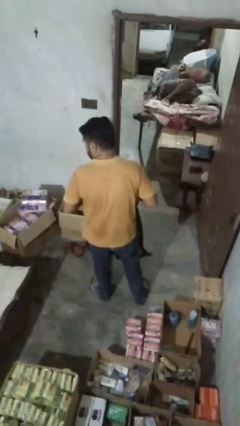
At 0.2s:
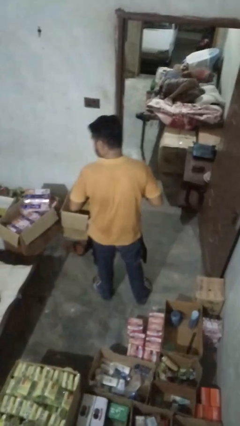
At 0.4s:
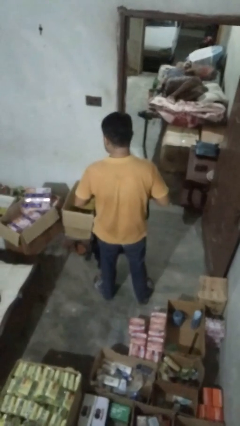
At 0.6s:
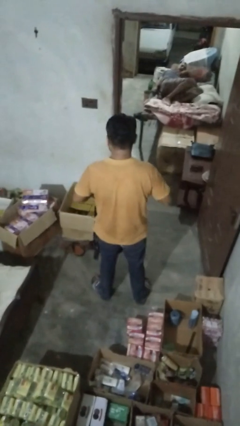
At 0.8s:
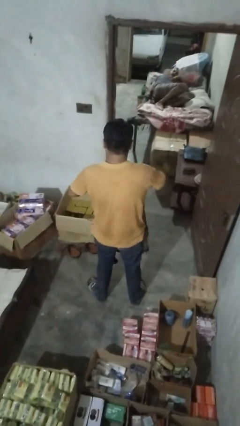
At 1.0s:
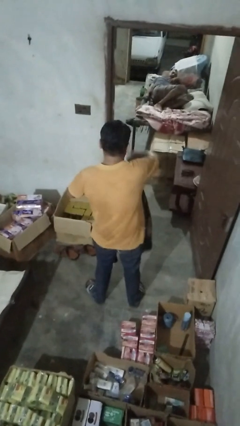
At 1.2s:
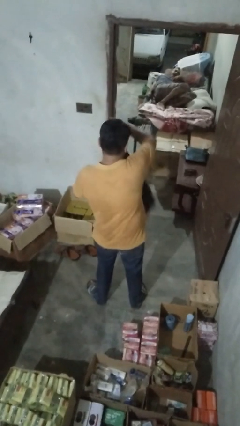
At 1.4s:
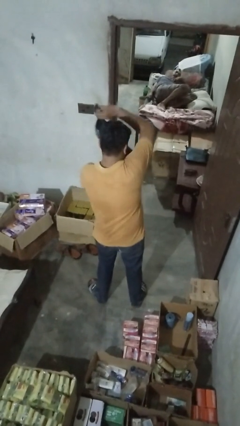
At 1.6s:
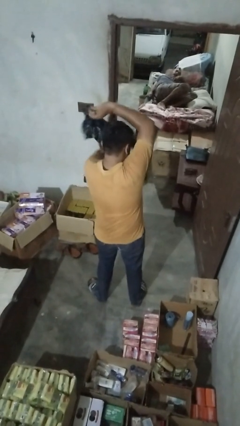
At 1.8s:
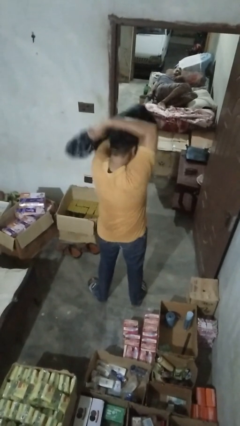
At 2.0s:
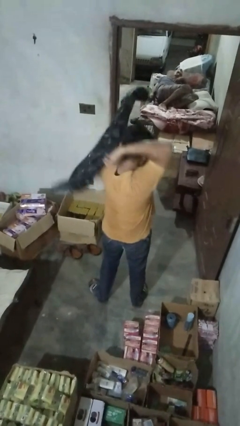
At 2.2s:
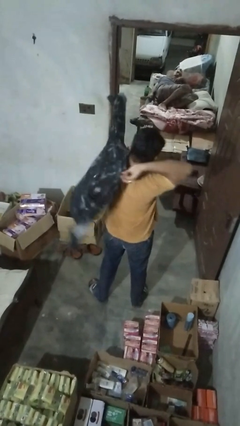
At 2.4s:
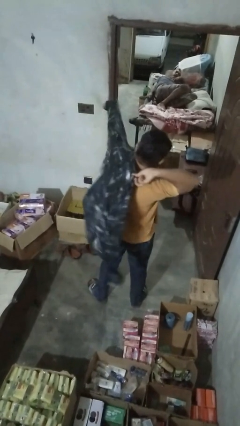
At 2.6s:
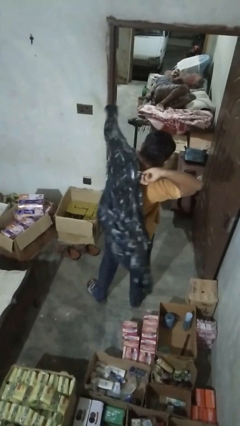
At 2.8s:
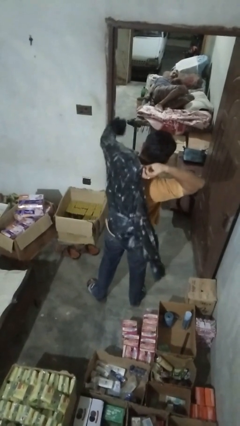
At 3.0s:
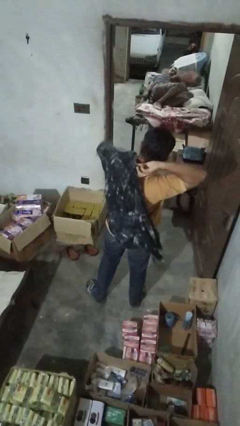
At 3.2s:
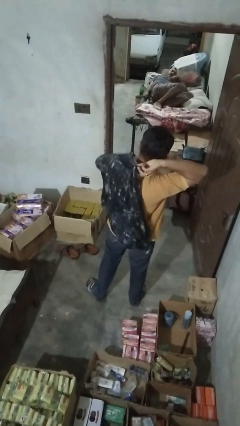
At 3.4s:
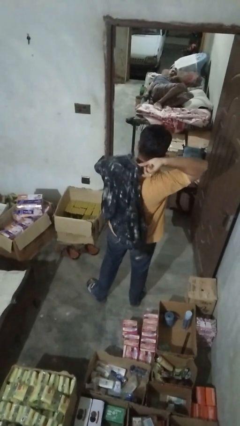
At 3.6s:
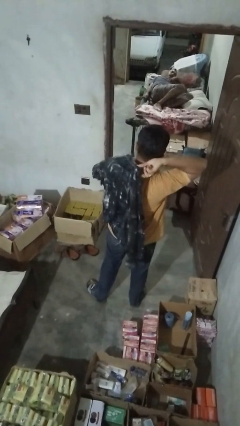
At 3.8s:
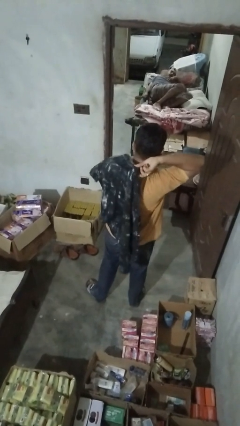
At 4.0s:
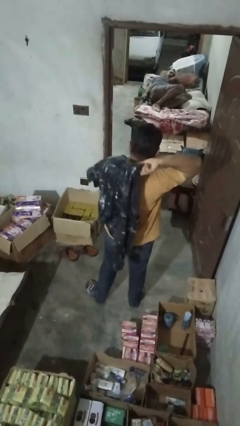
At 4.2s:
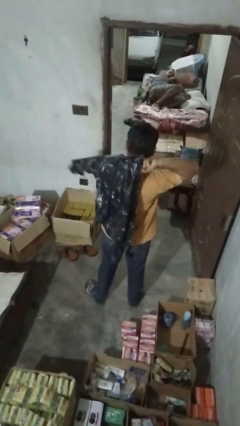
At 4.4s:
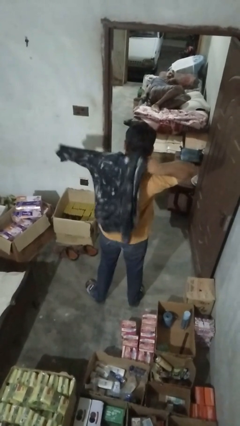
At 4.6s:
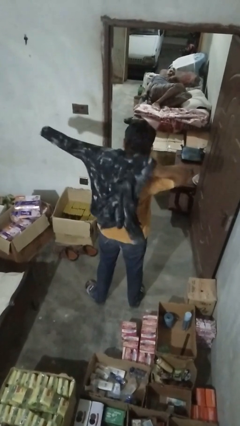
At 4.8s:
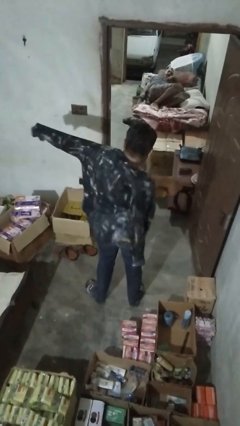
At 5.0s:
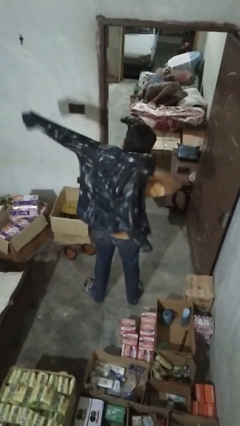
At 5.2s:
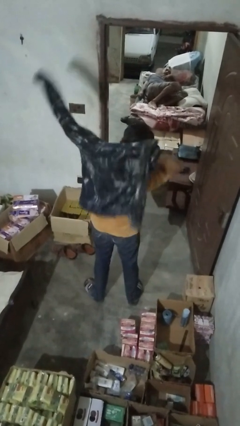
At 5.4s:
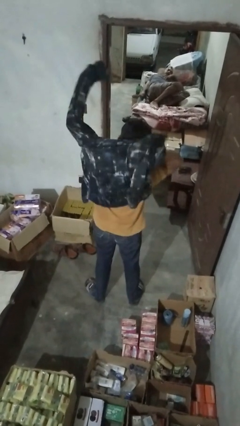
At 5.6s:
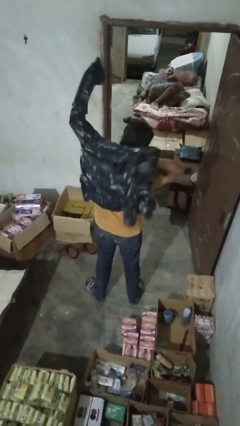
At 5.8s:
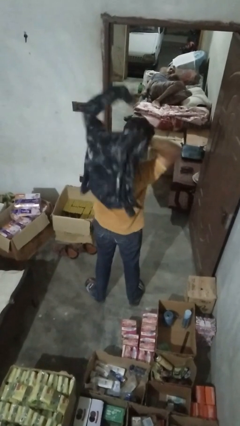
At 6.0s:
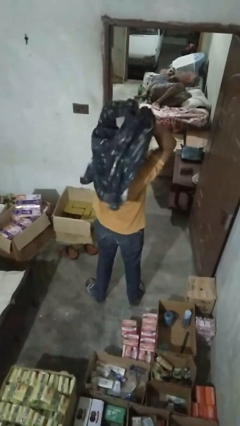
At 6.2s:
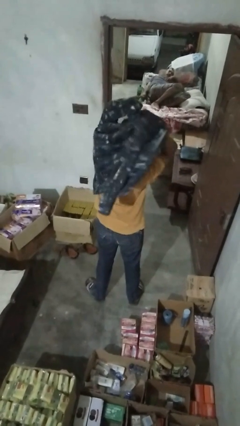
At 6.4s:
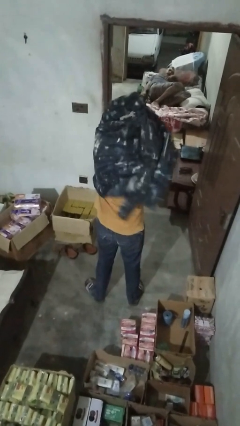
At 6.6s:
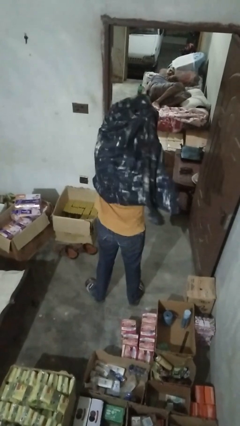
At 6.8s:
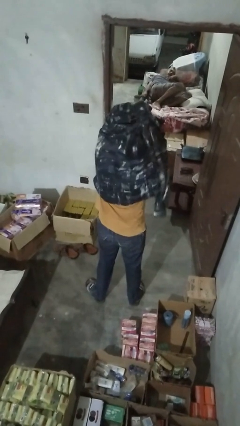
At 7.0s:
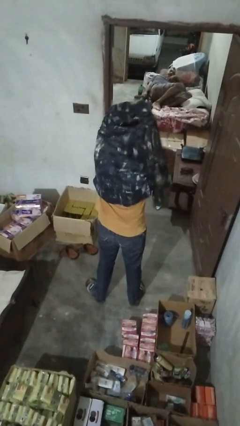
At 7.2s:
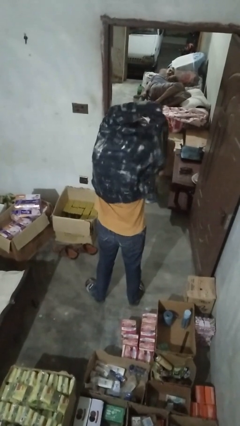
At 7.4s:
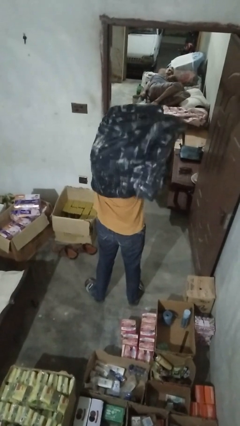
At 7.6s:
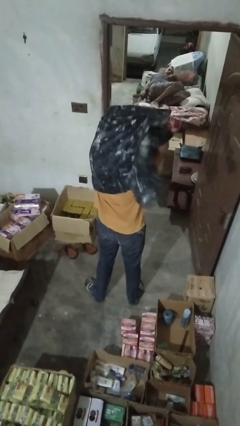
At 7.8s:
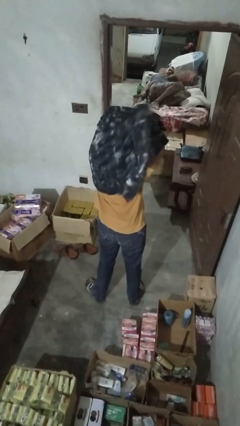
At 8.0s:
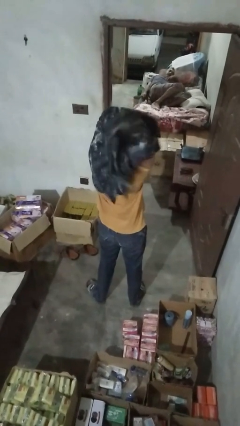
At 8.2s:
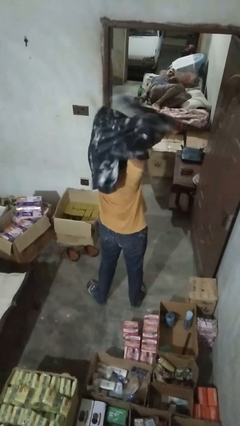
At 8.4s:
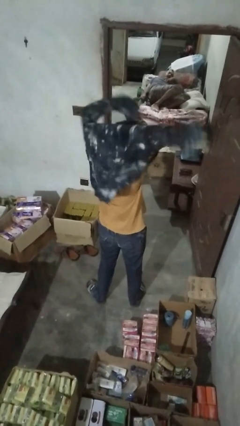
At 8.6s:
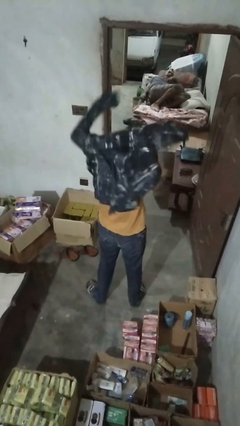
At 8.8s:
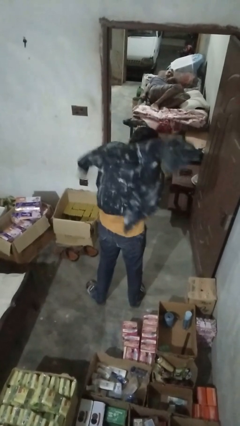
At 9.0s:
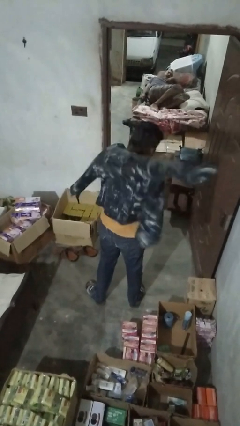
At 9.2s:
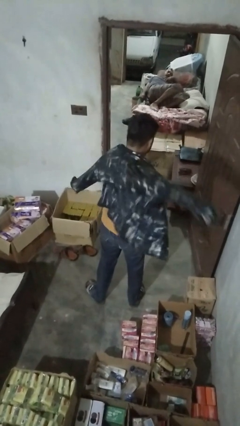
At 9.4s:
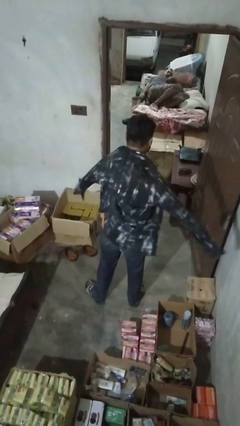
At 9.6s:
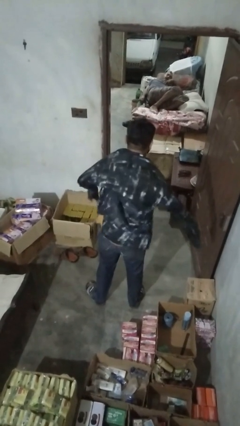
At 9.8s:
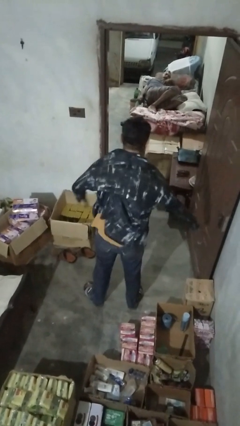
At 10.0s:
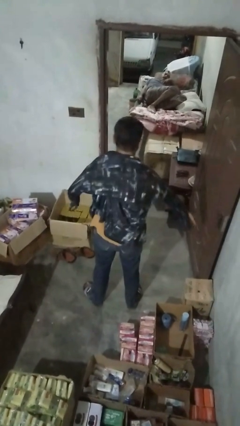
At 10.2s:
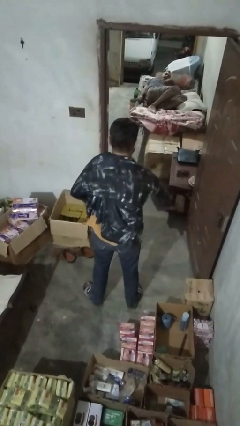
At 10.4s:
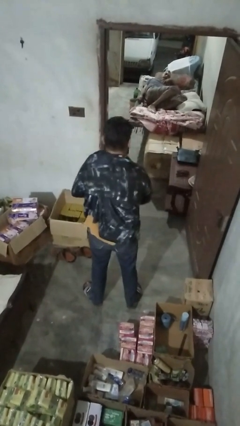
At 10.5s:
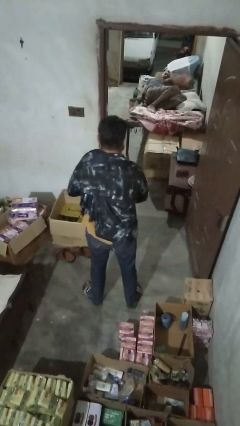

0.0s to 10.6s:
person puts on shirt

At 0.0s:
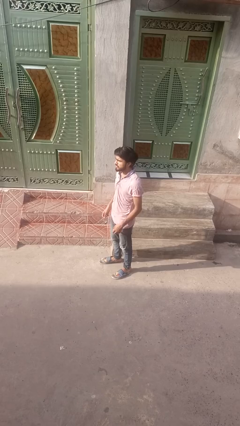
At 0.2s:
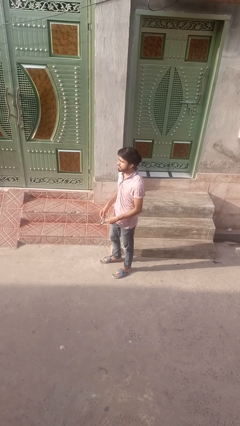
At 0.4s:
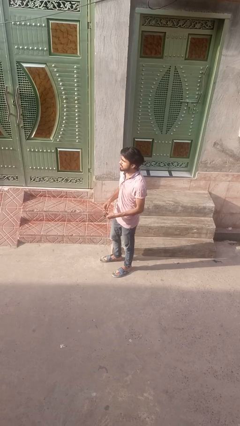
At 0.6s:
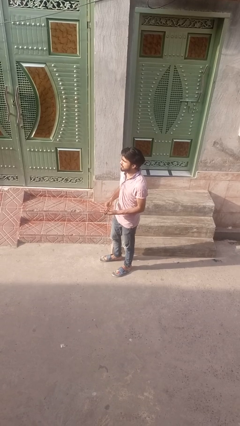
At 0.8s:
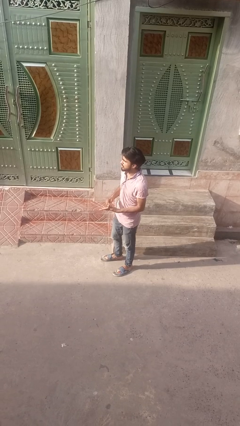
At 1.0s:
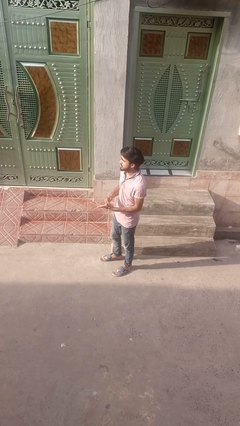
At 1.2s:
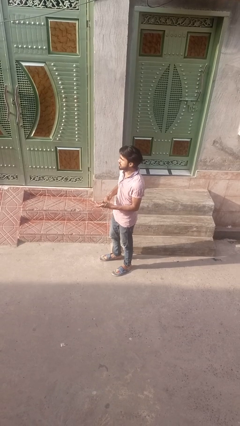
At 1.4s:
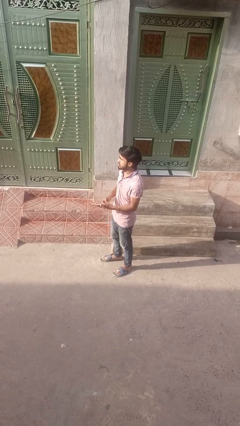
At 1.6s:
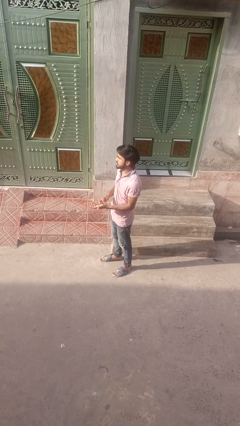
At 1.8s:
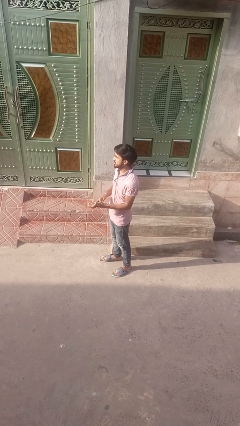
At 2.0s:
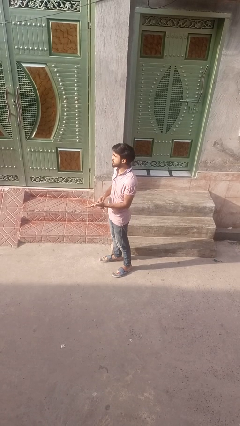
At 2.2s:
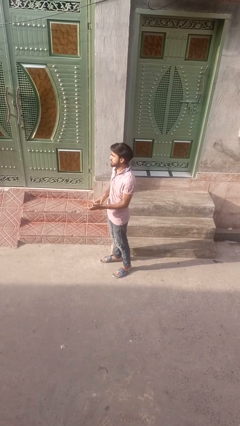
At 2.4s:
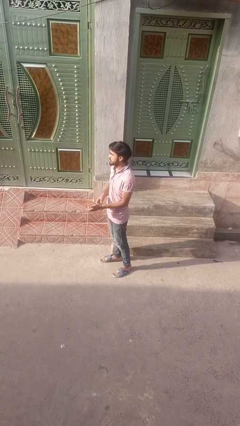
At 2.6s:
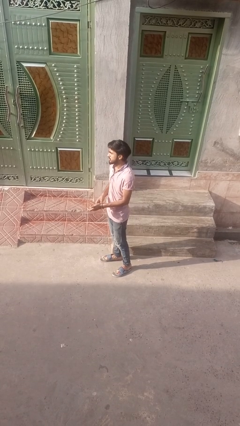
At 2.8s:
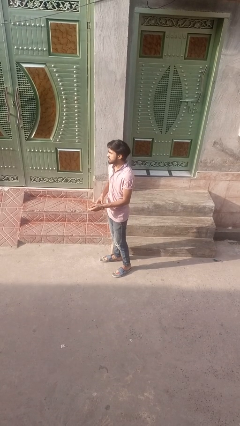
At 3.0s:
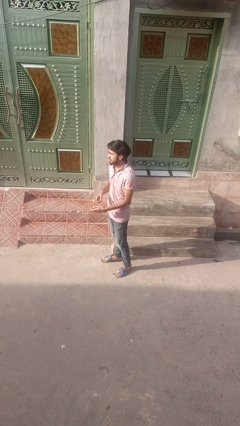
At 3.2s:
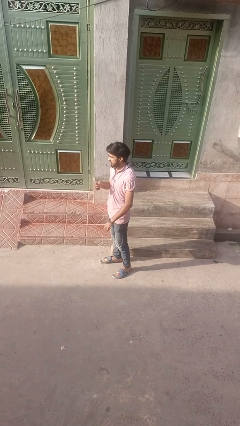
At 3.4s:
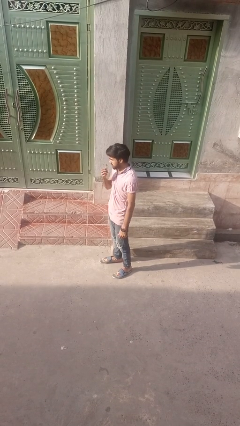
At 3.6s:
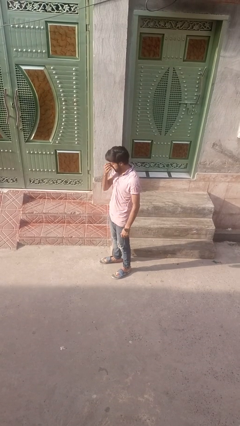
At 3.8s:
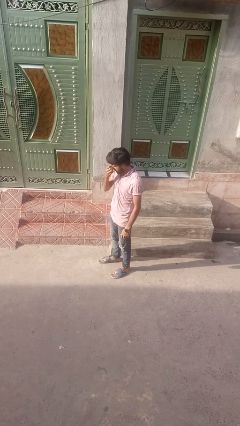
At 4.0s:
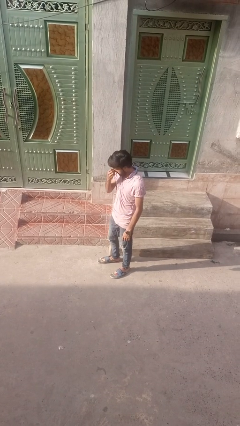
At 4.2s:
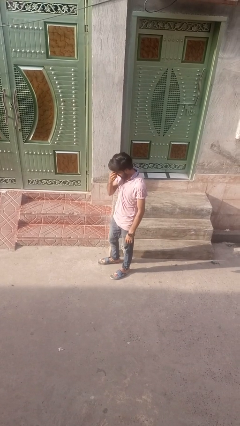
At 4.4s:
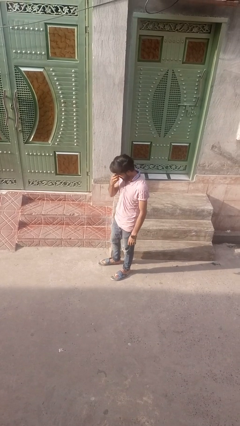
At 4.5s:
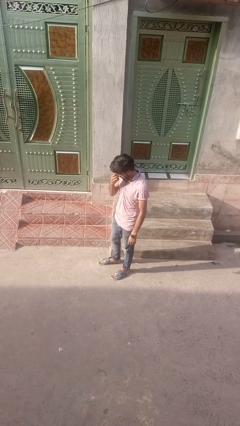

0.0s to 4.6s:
person puts on wristwatch

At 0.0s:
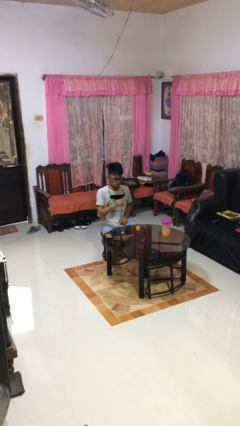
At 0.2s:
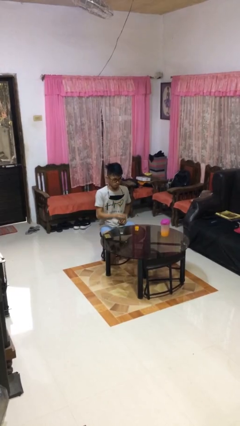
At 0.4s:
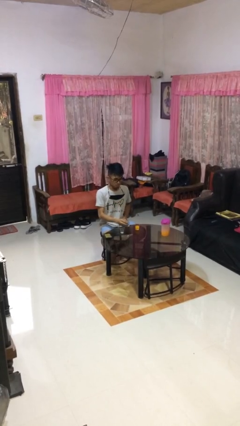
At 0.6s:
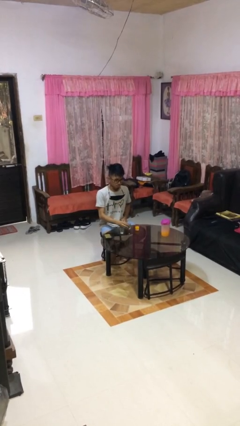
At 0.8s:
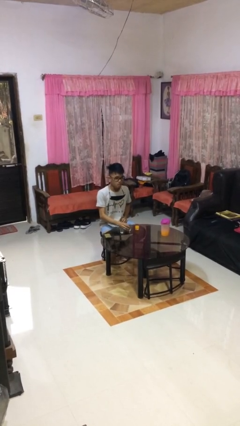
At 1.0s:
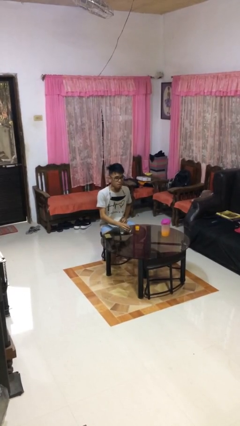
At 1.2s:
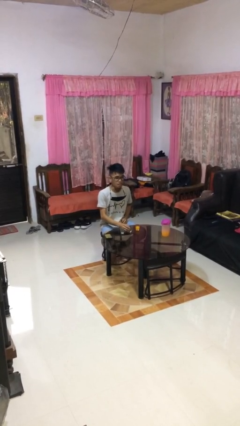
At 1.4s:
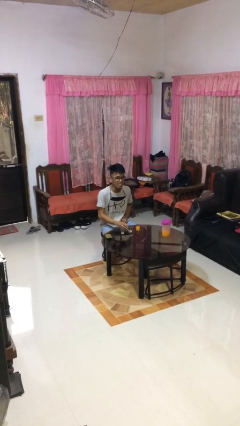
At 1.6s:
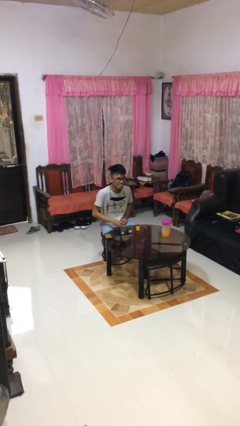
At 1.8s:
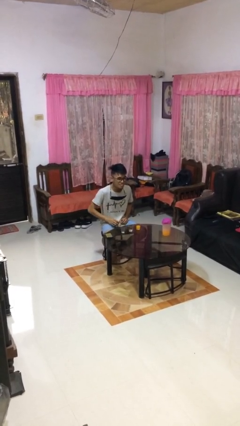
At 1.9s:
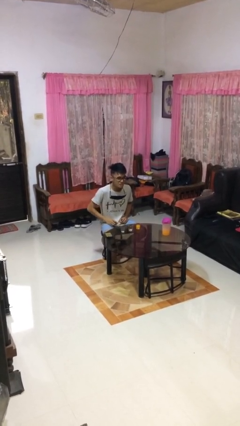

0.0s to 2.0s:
person puts down object on table

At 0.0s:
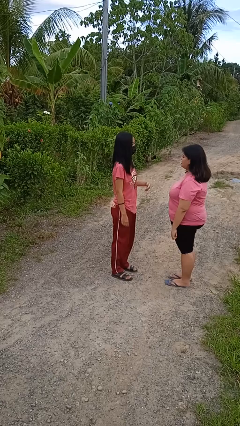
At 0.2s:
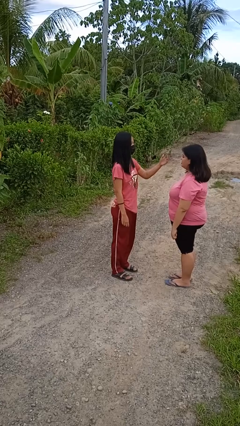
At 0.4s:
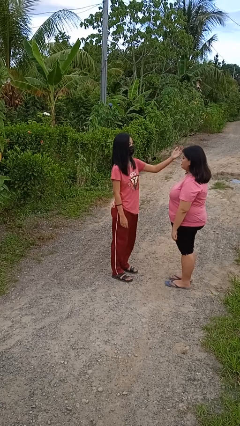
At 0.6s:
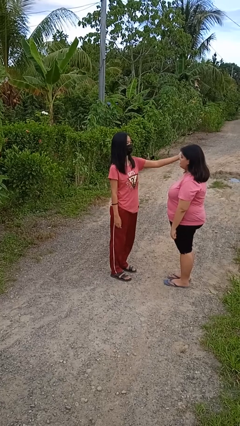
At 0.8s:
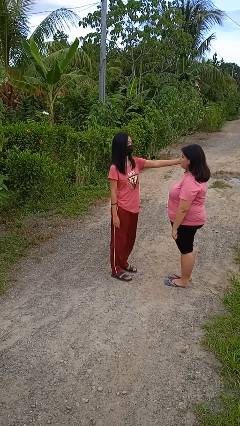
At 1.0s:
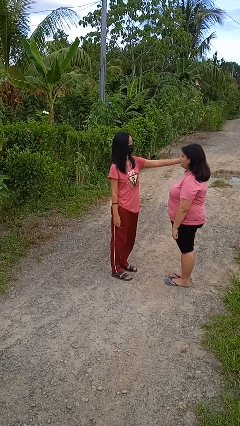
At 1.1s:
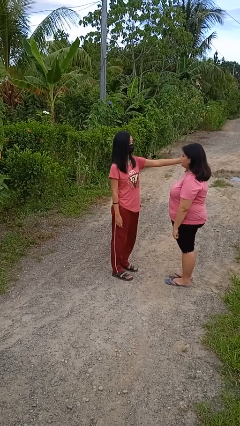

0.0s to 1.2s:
person touches face of person
